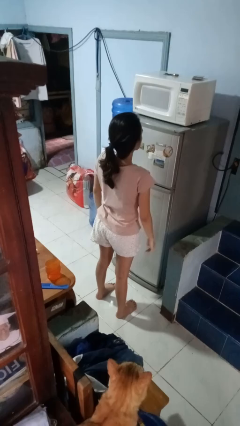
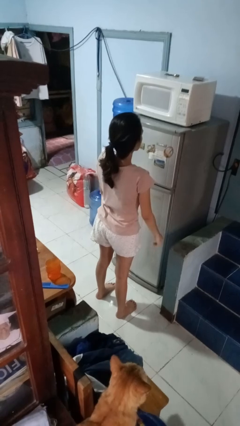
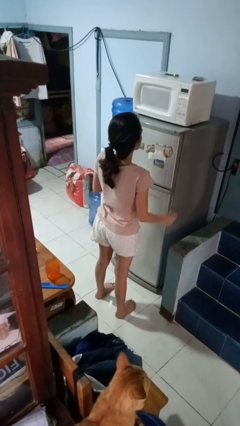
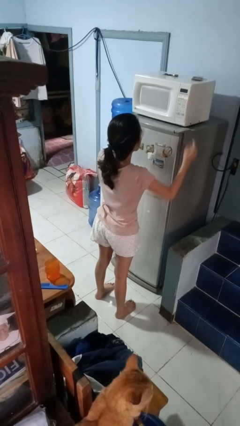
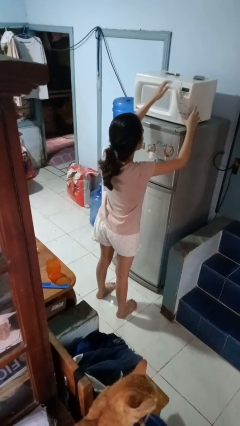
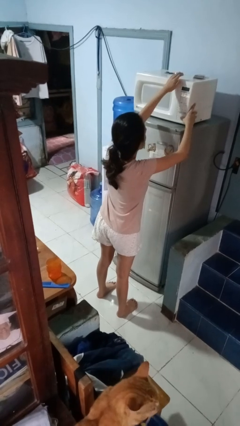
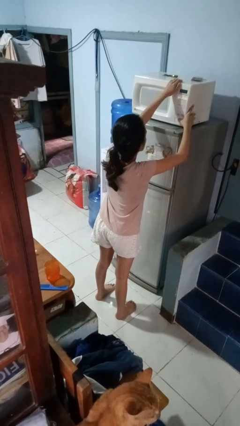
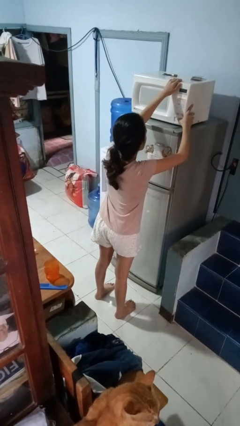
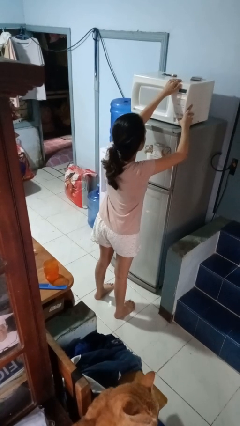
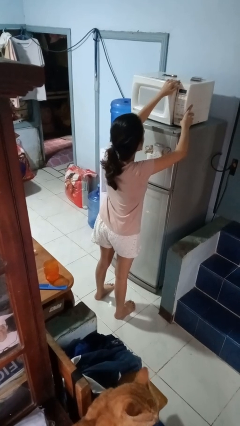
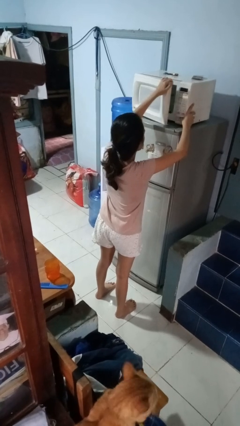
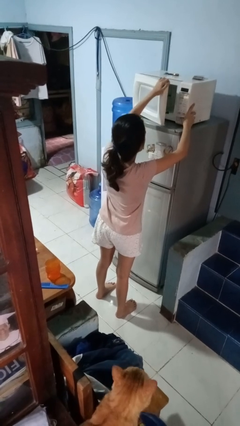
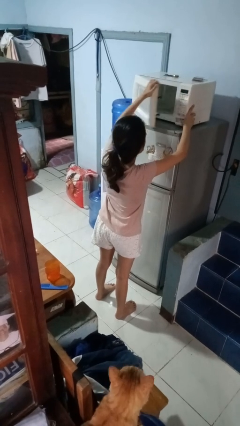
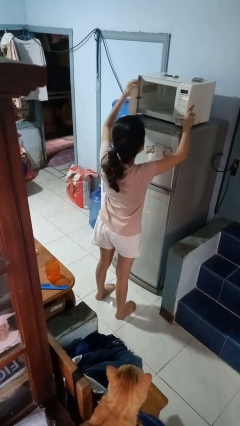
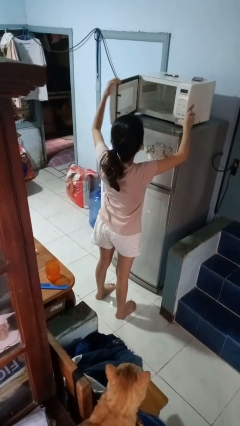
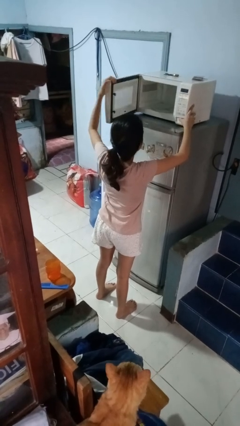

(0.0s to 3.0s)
person opens microwave

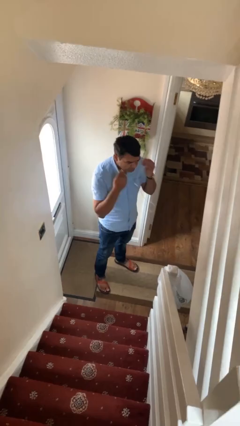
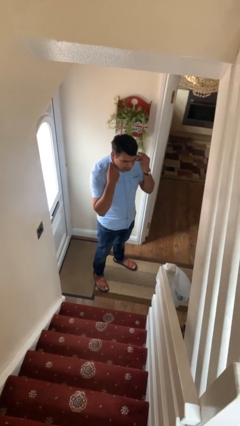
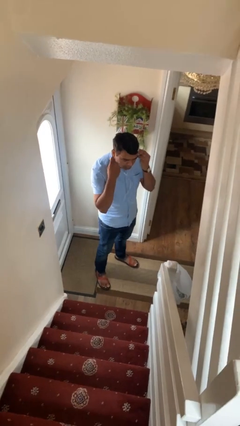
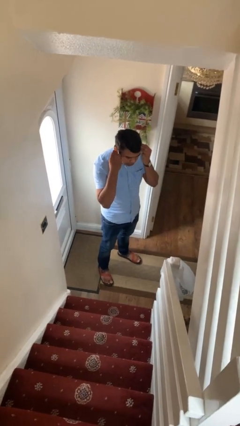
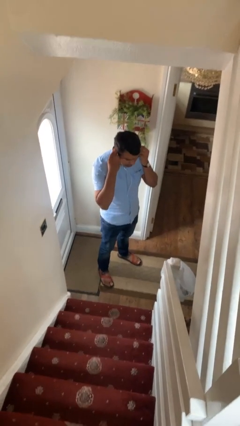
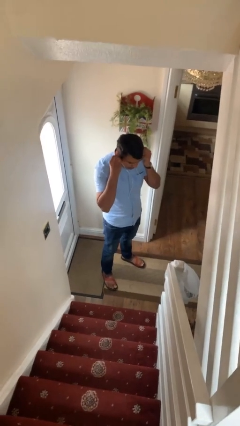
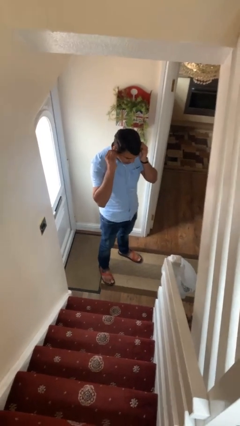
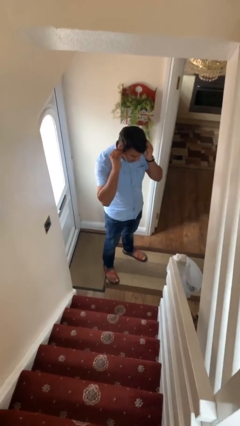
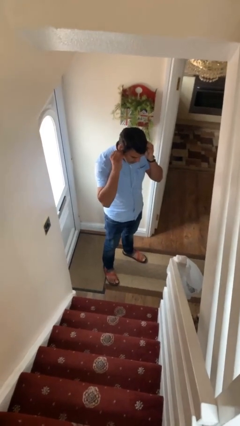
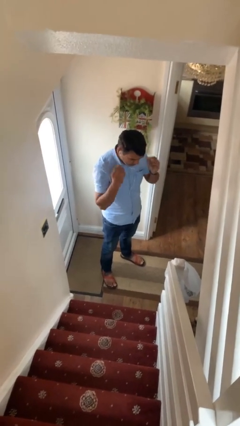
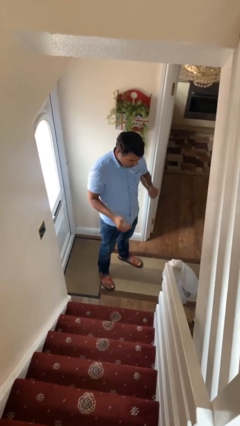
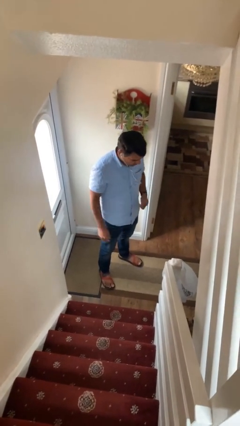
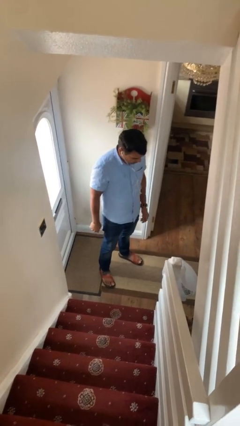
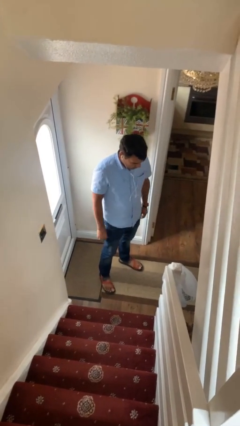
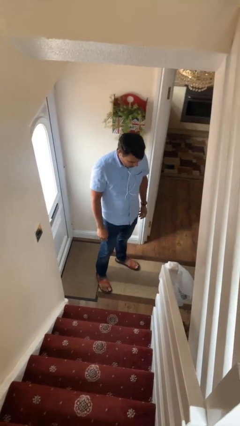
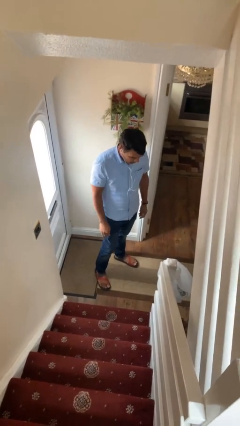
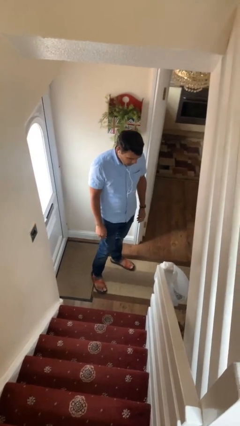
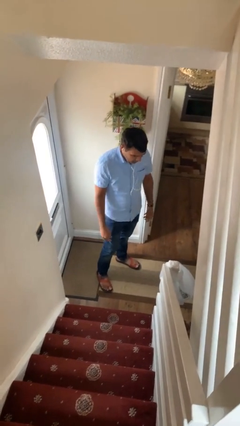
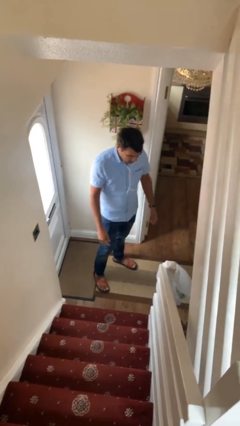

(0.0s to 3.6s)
person puts on headphones

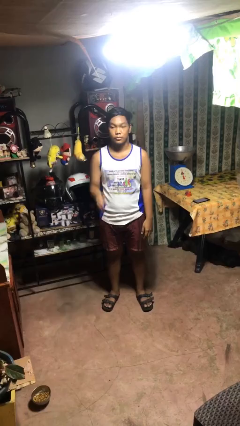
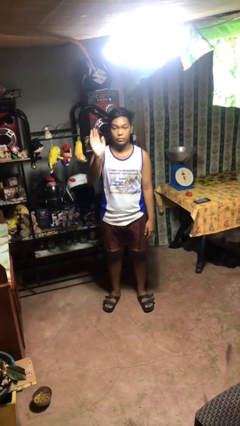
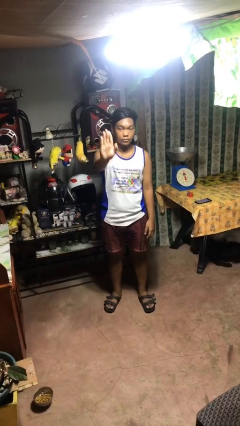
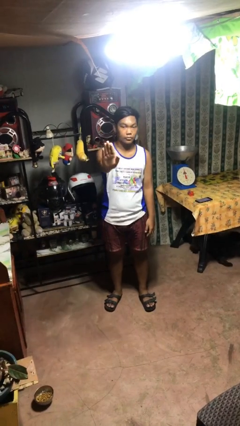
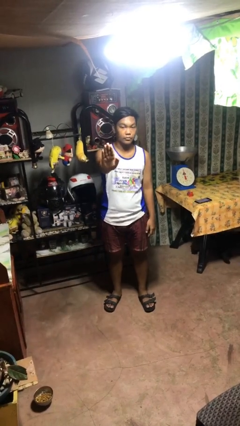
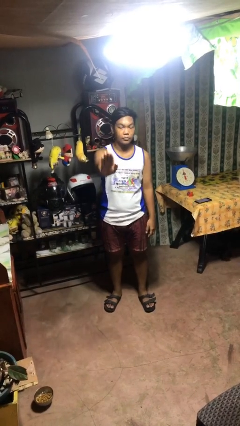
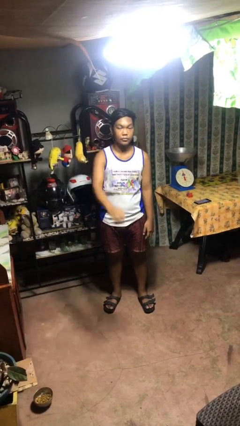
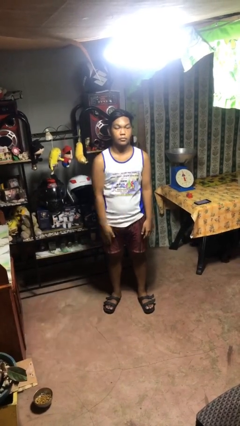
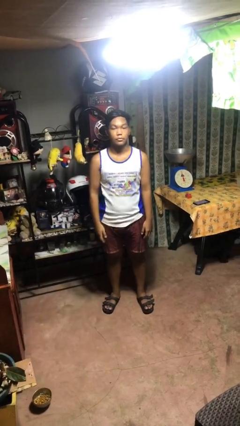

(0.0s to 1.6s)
person gestures stop

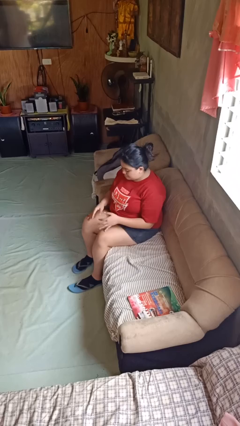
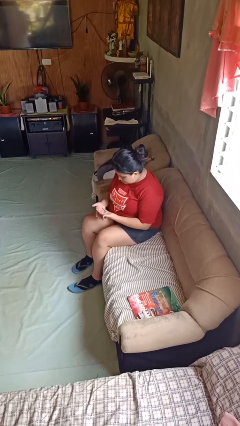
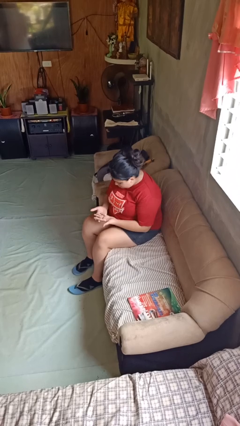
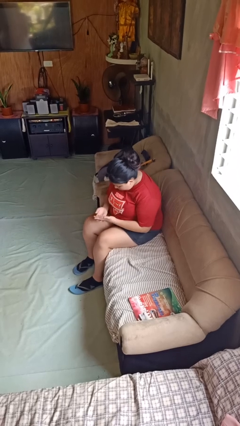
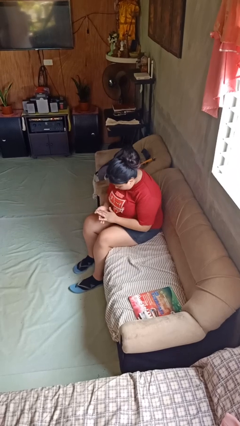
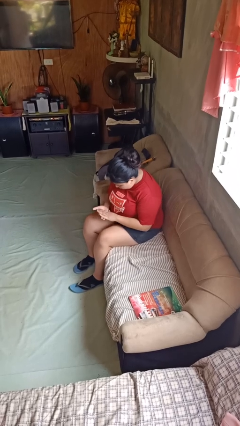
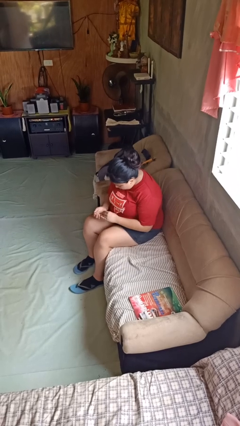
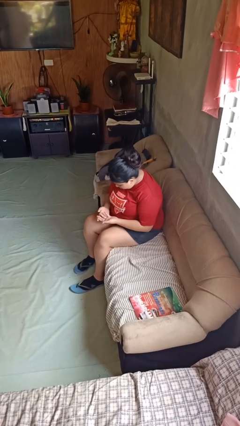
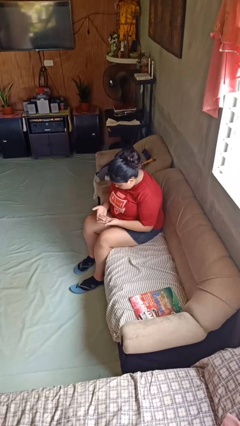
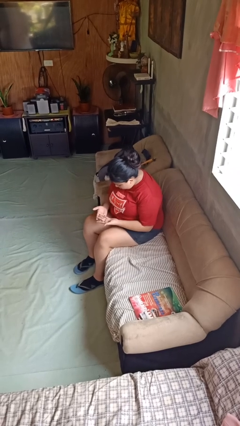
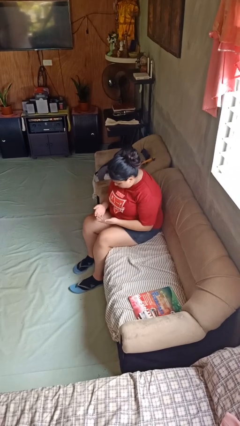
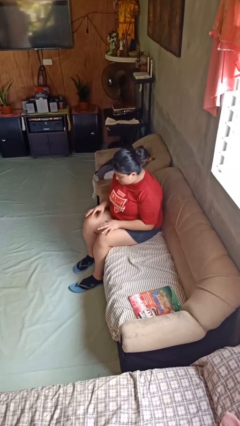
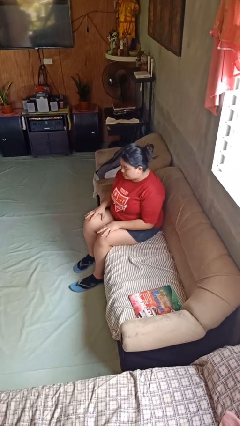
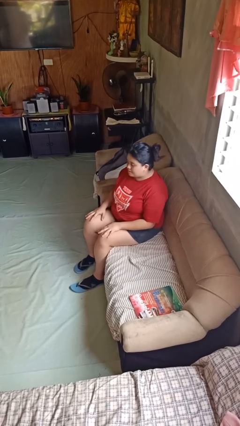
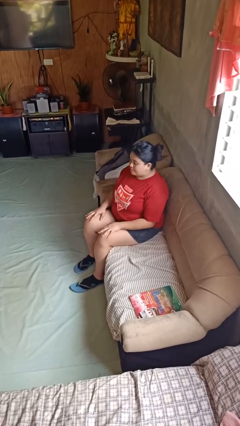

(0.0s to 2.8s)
person looks at hands in lap

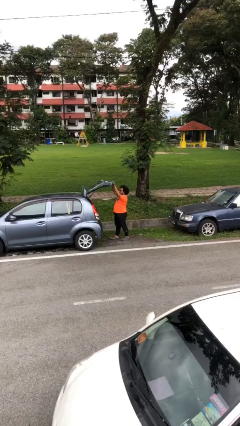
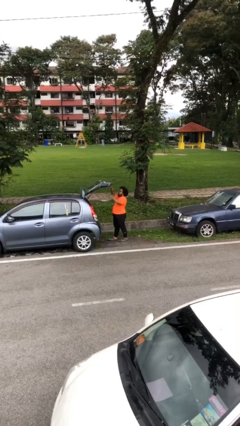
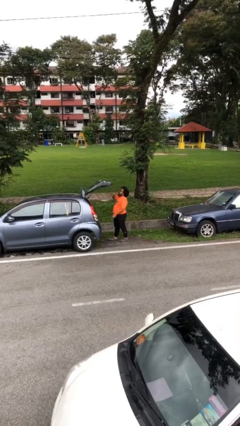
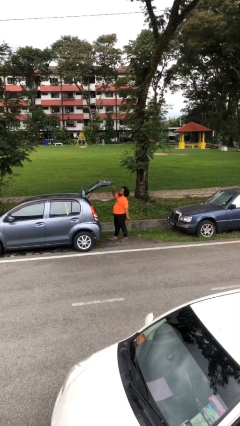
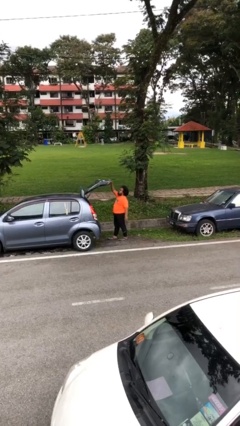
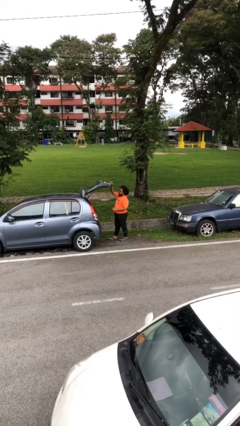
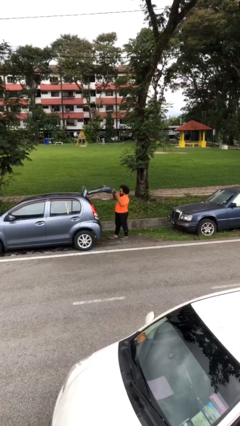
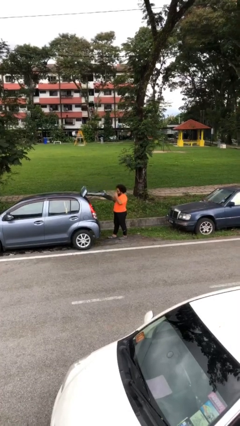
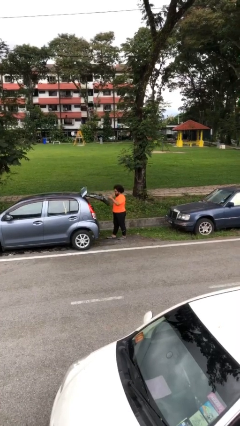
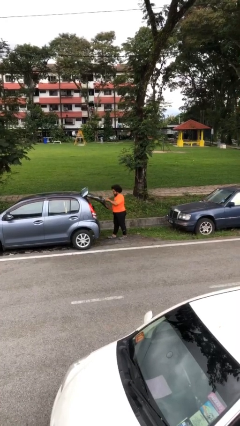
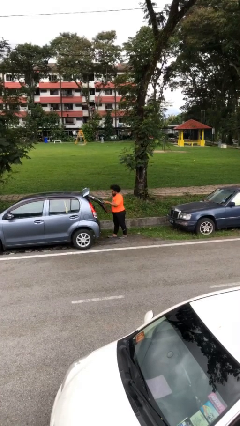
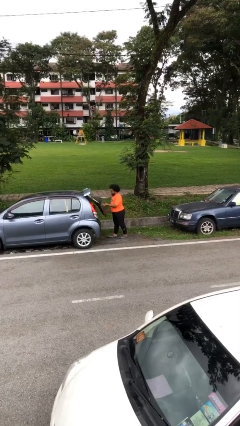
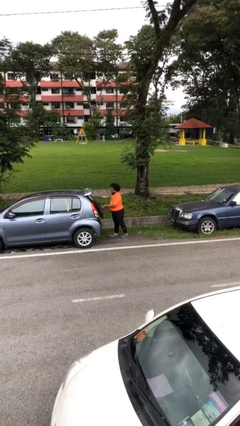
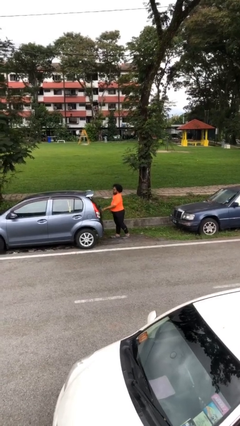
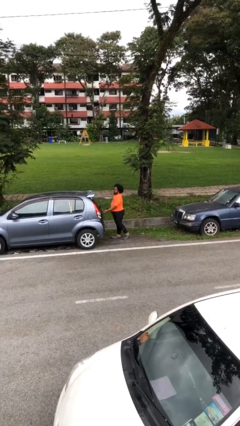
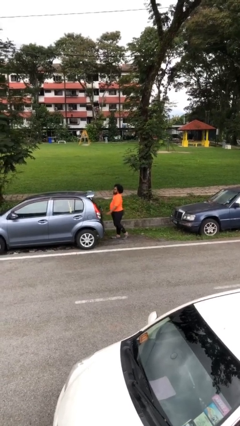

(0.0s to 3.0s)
person closes car trunk

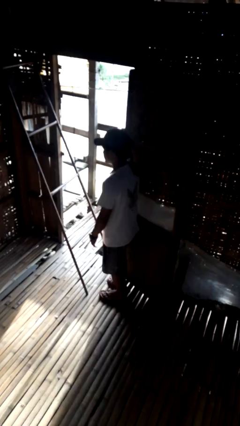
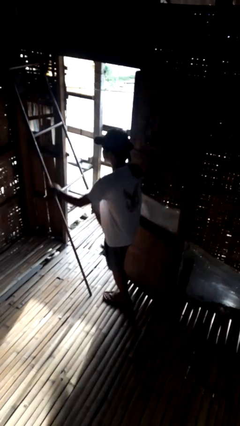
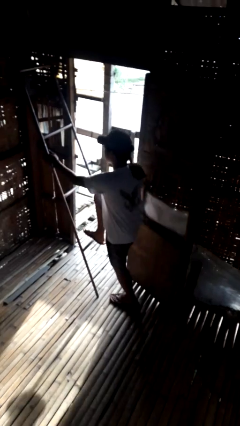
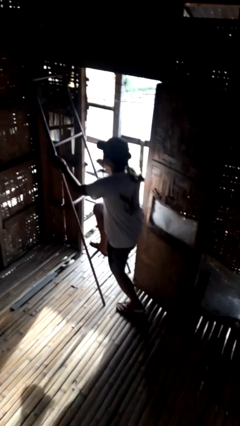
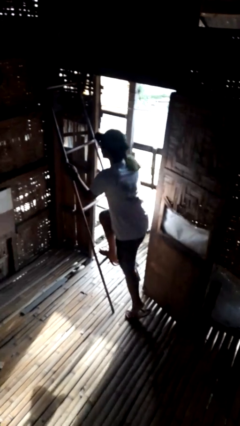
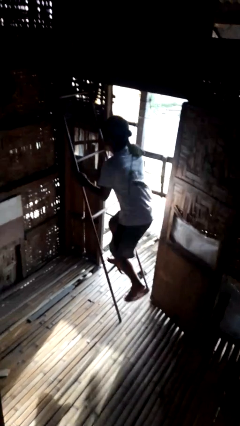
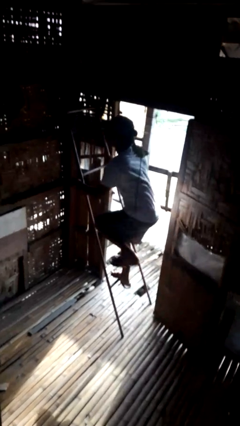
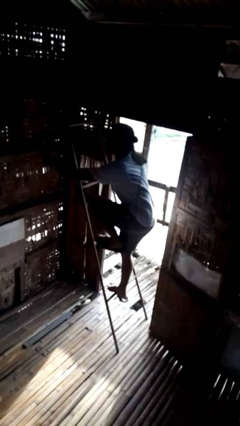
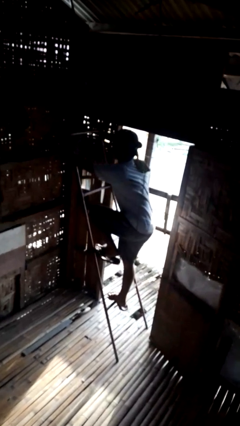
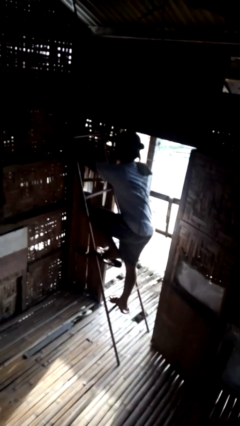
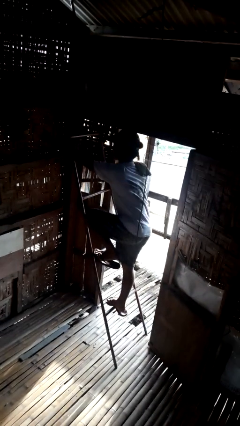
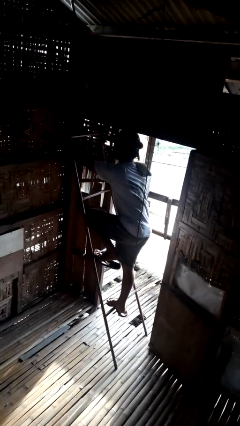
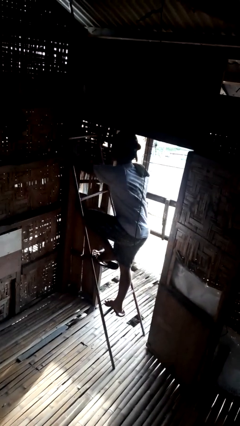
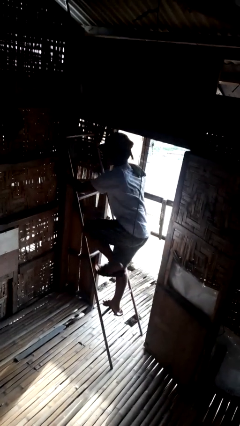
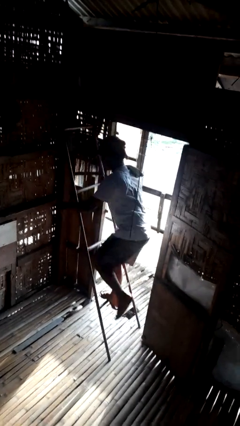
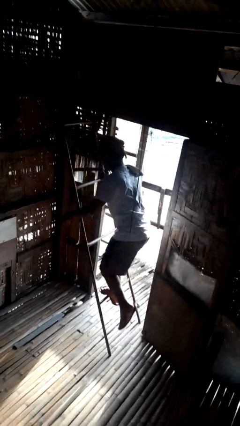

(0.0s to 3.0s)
person climbs up ladder

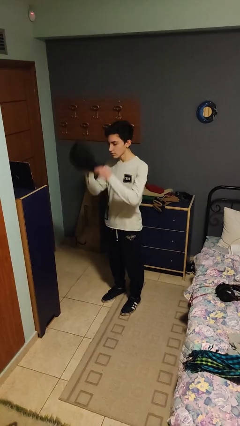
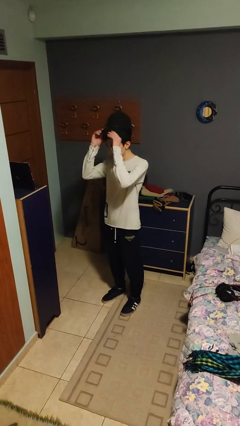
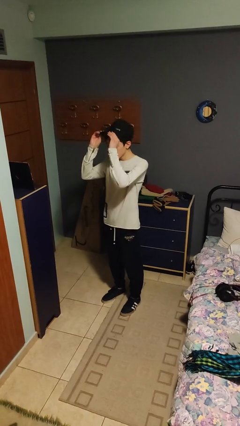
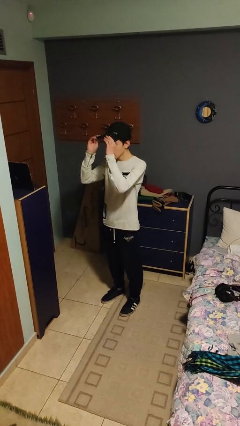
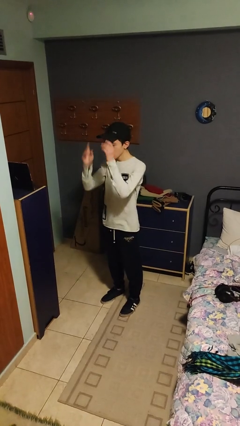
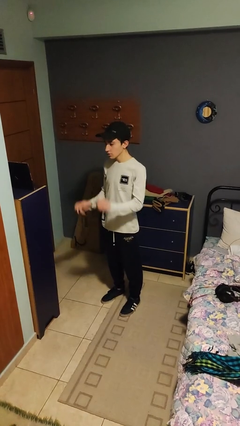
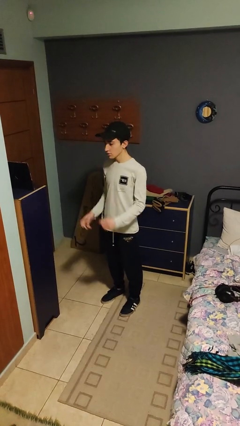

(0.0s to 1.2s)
person puts on hat
